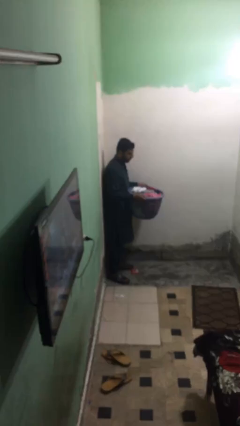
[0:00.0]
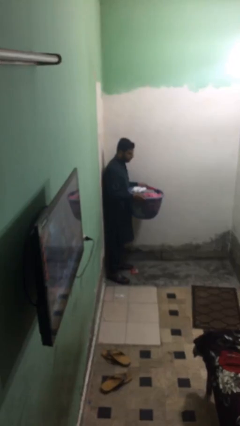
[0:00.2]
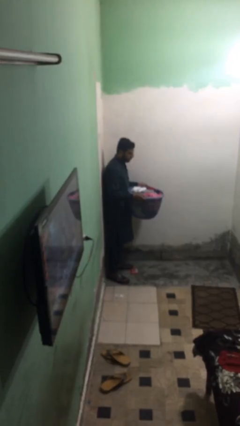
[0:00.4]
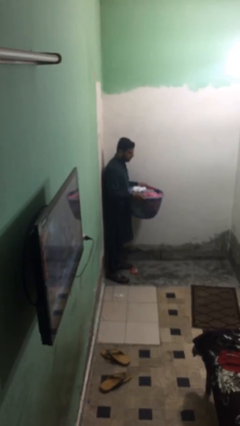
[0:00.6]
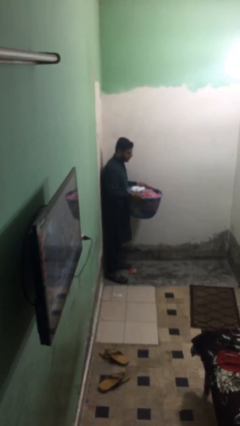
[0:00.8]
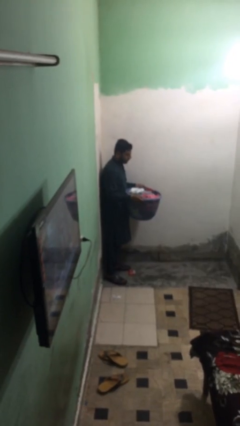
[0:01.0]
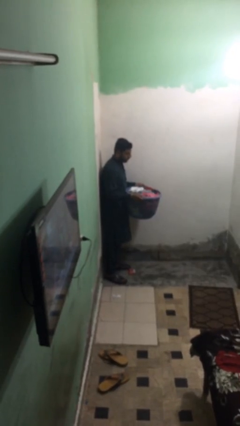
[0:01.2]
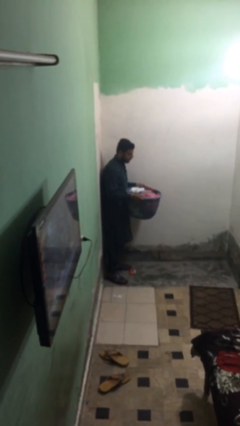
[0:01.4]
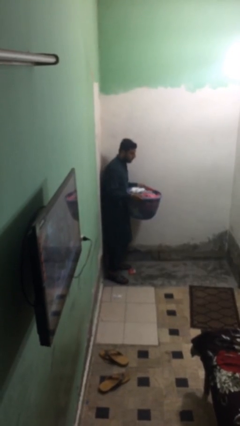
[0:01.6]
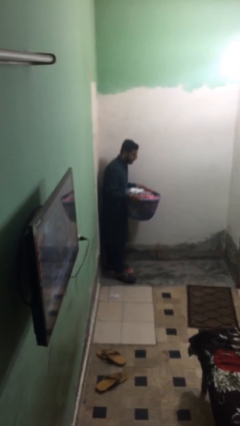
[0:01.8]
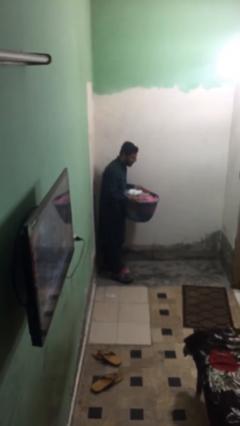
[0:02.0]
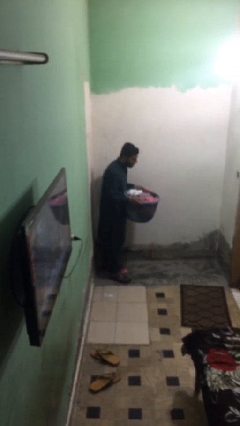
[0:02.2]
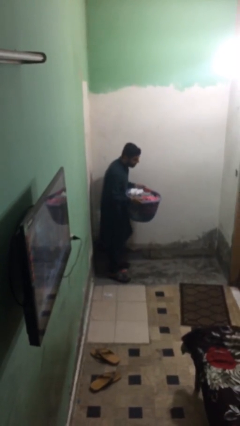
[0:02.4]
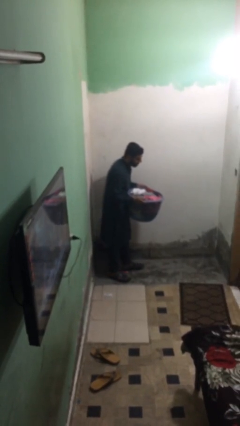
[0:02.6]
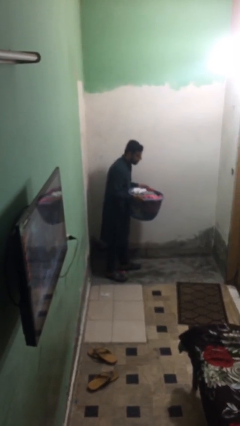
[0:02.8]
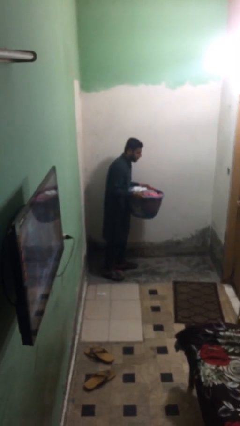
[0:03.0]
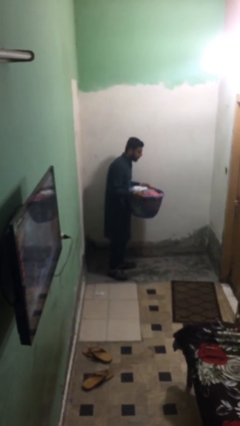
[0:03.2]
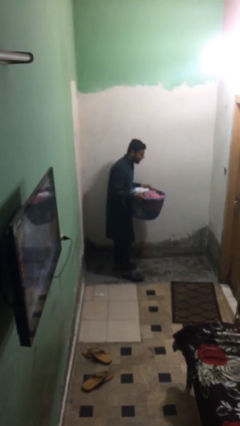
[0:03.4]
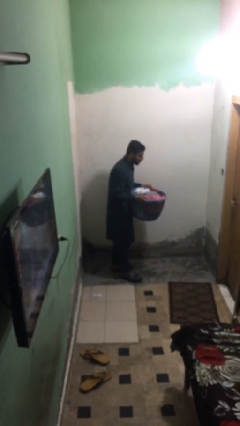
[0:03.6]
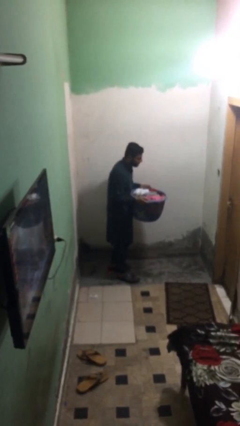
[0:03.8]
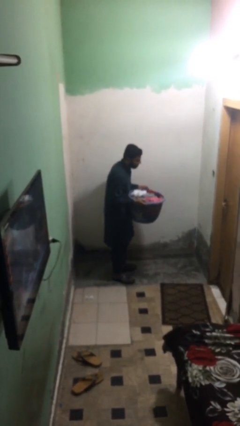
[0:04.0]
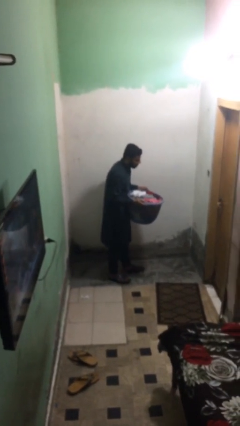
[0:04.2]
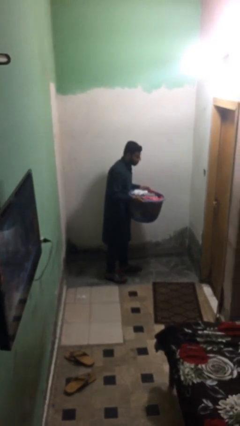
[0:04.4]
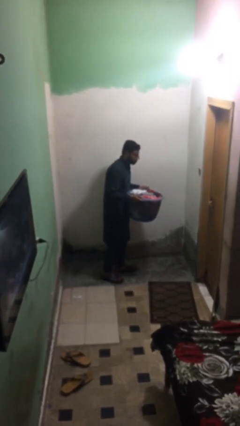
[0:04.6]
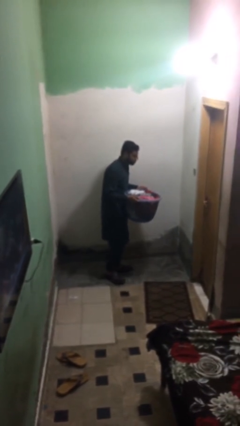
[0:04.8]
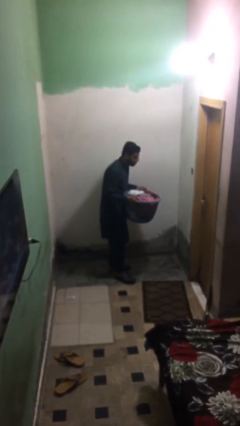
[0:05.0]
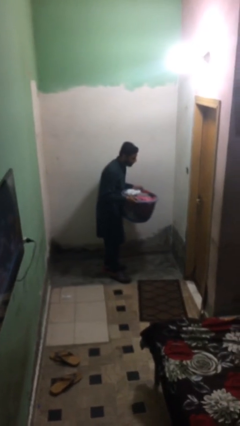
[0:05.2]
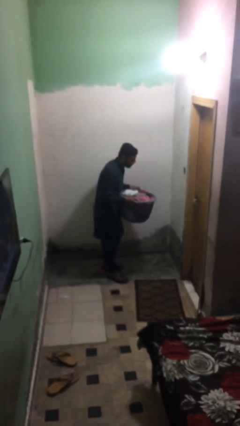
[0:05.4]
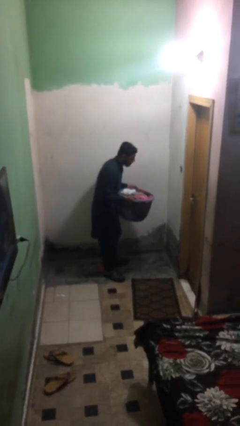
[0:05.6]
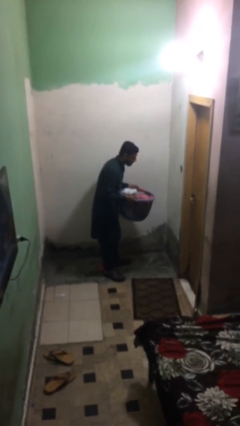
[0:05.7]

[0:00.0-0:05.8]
person carries heavy object

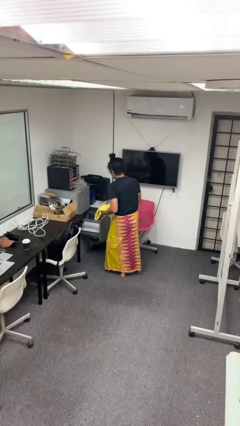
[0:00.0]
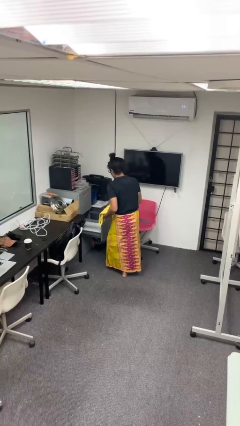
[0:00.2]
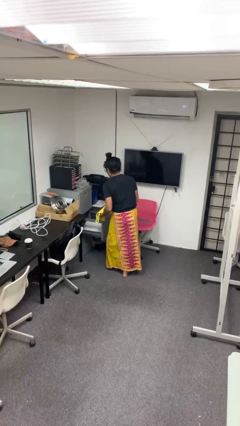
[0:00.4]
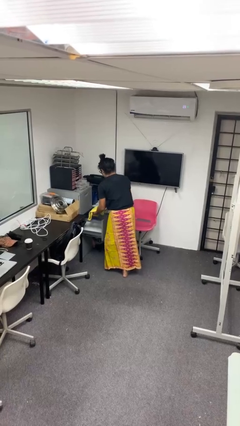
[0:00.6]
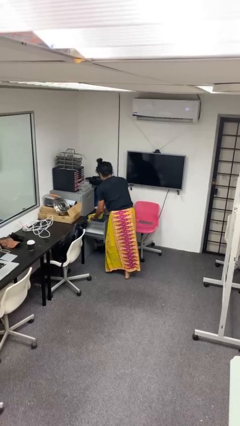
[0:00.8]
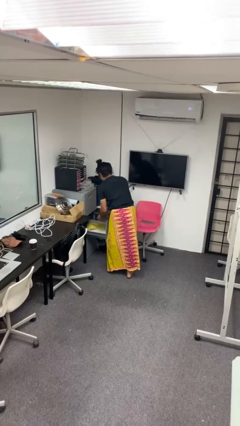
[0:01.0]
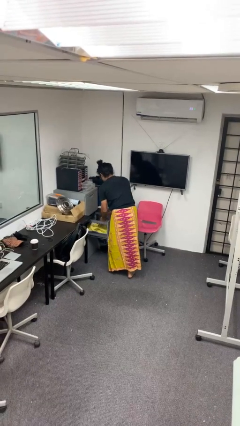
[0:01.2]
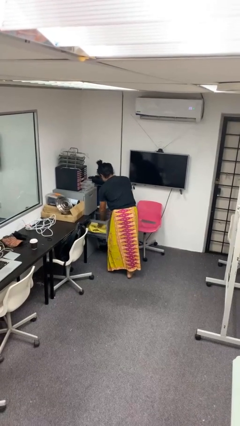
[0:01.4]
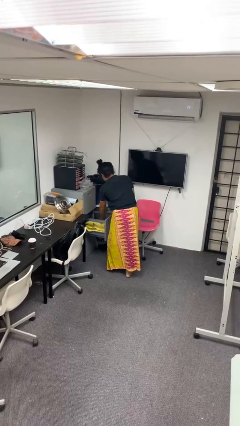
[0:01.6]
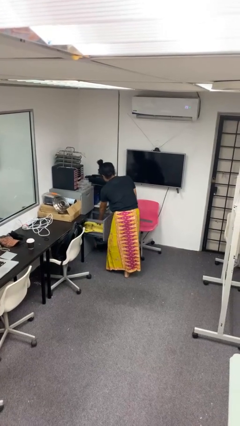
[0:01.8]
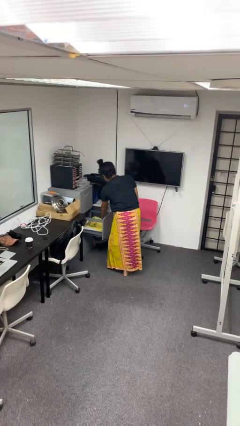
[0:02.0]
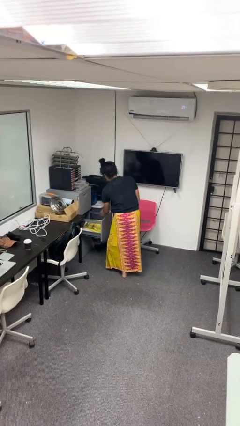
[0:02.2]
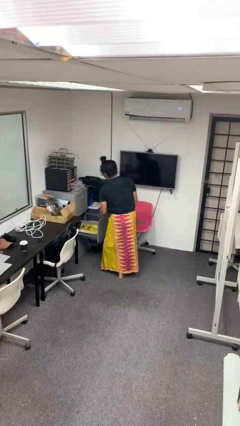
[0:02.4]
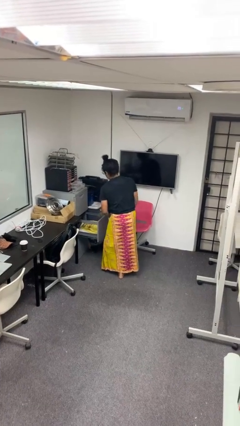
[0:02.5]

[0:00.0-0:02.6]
person puts clothes into dresser

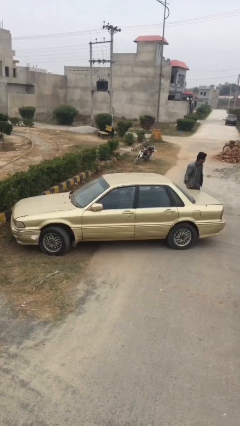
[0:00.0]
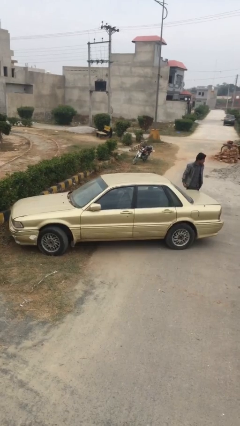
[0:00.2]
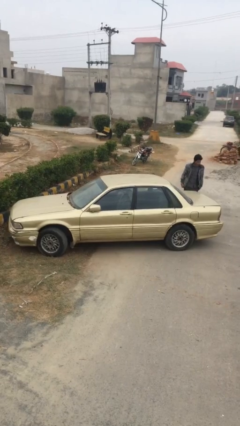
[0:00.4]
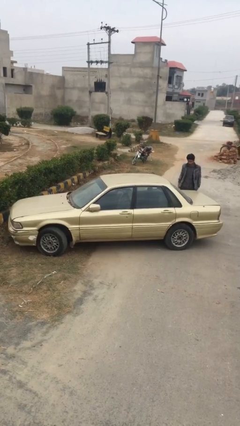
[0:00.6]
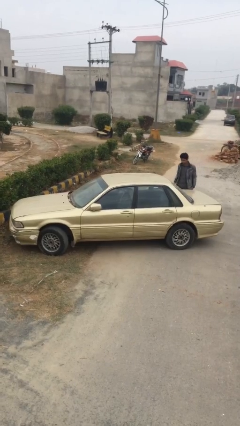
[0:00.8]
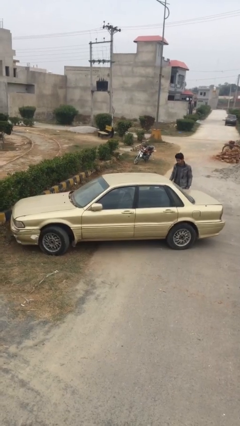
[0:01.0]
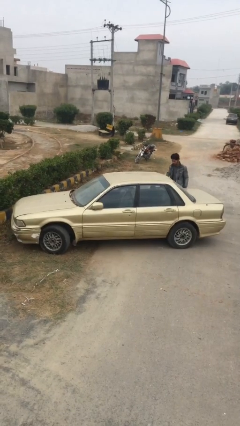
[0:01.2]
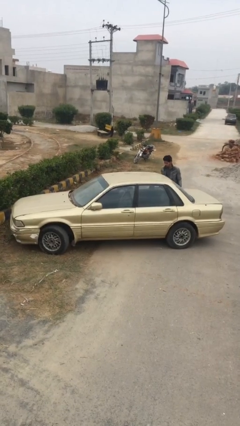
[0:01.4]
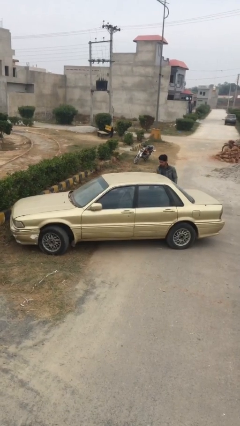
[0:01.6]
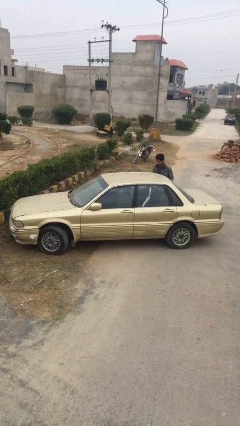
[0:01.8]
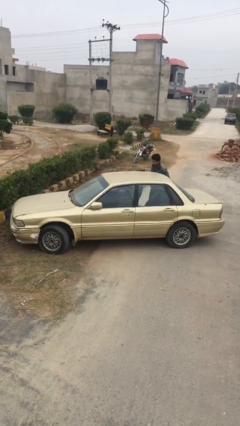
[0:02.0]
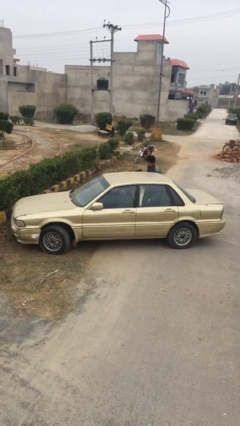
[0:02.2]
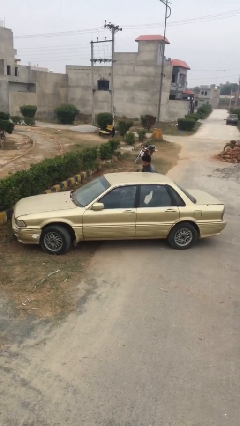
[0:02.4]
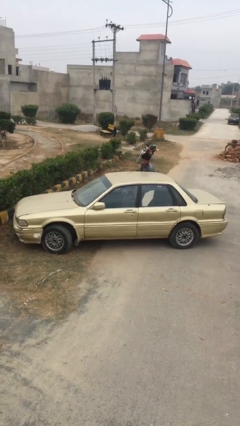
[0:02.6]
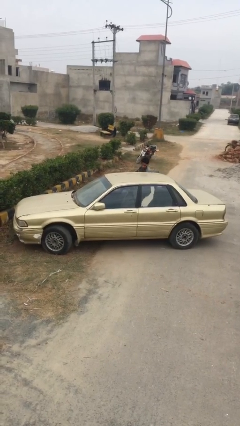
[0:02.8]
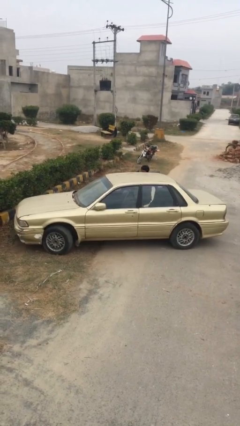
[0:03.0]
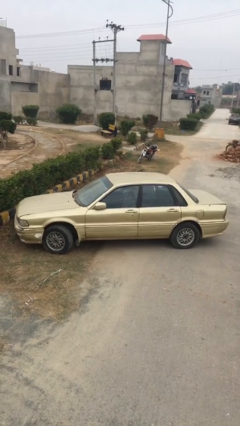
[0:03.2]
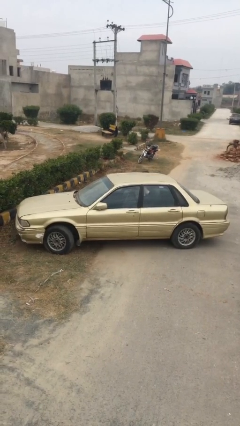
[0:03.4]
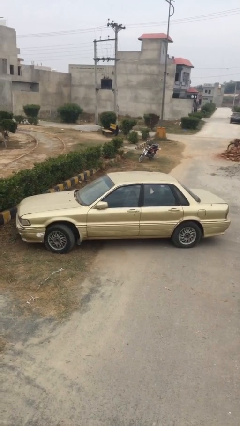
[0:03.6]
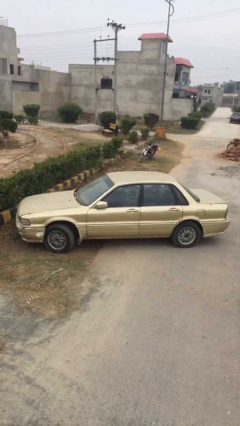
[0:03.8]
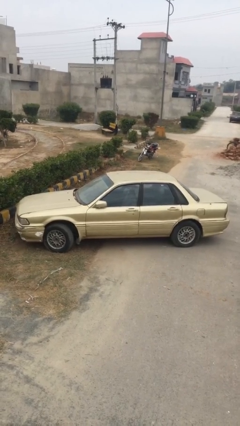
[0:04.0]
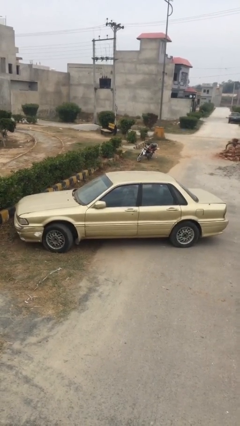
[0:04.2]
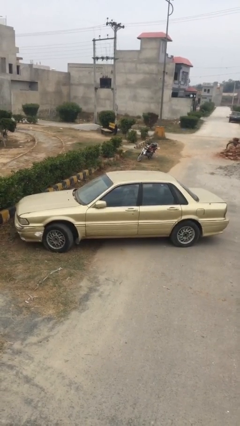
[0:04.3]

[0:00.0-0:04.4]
car picks up person

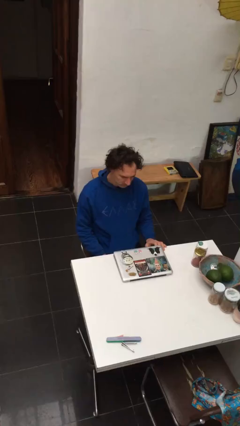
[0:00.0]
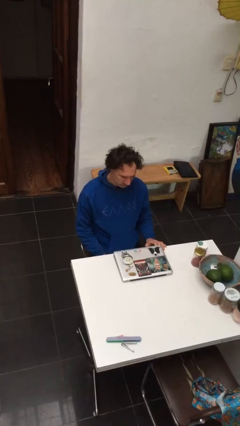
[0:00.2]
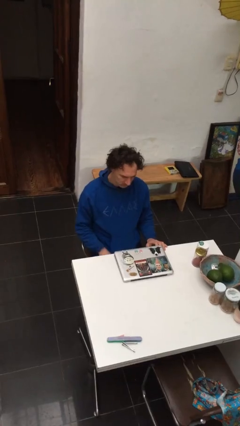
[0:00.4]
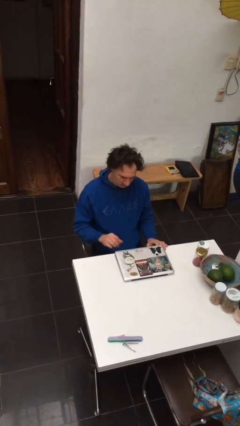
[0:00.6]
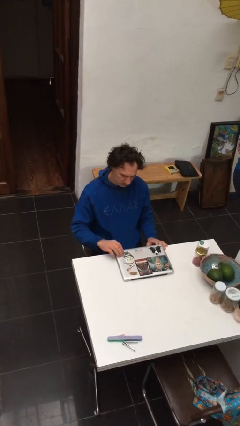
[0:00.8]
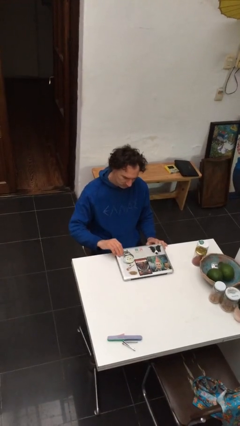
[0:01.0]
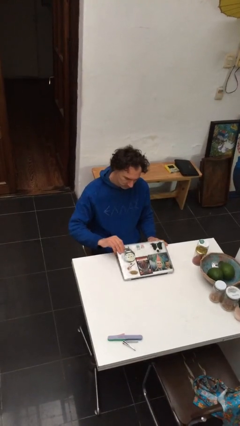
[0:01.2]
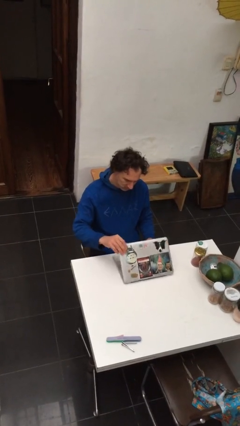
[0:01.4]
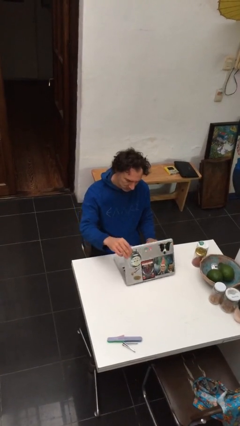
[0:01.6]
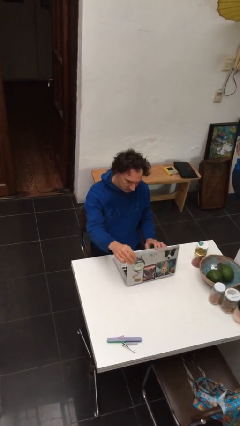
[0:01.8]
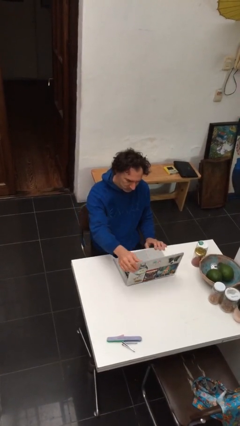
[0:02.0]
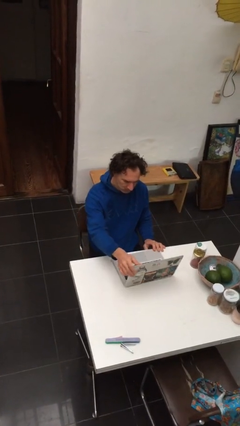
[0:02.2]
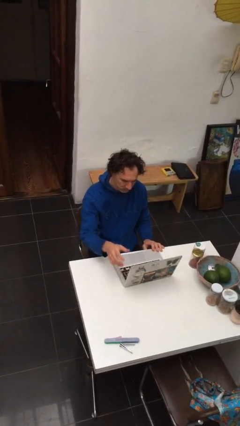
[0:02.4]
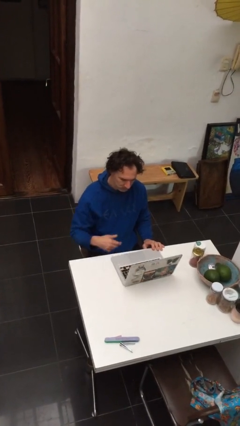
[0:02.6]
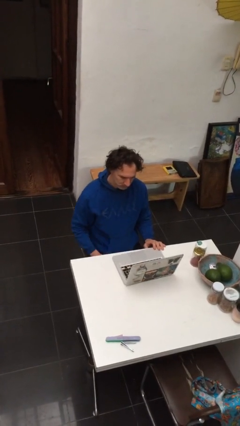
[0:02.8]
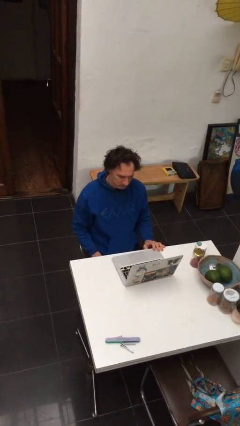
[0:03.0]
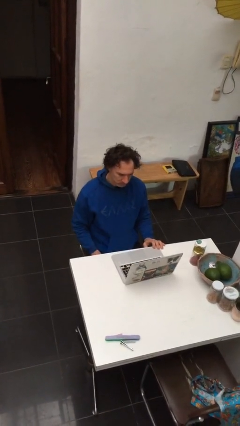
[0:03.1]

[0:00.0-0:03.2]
person opens laptop

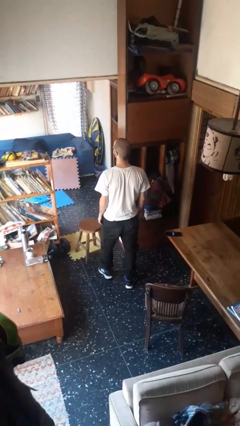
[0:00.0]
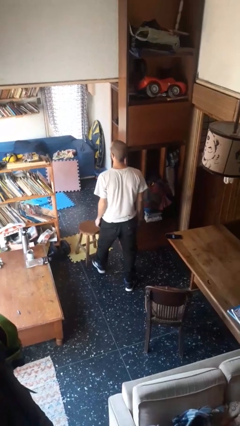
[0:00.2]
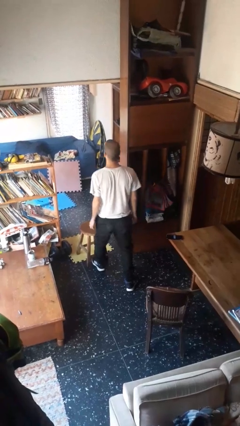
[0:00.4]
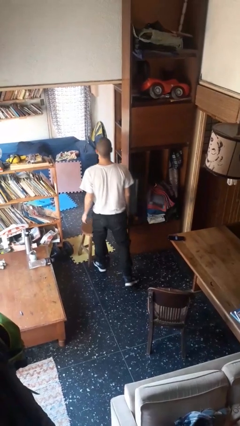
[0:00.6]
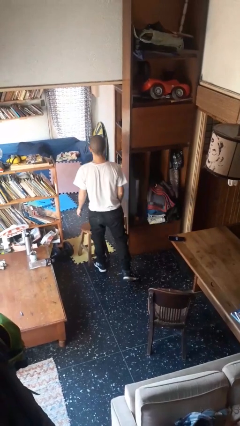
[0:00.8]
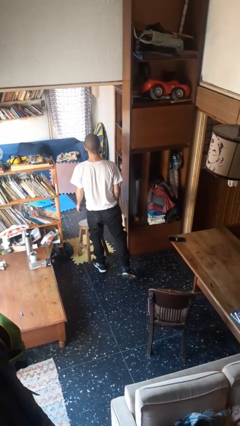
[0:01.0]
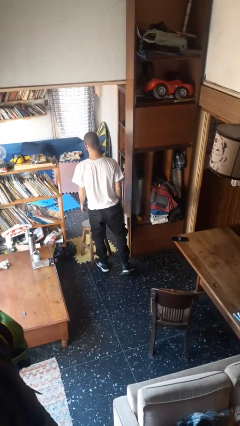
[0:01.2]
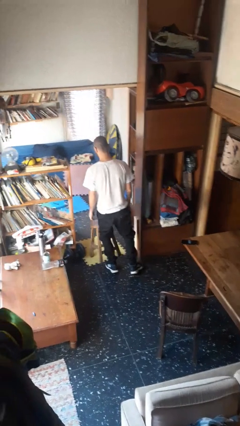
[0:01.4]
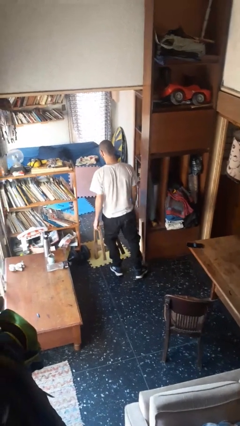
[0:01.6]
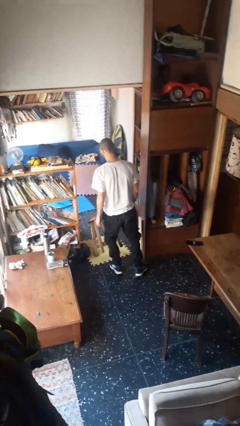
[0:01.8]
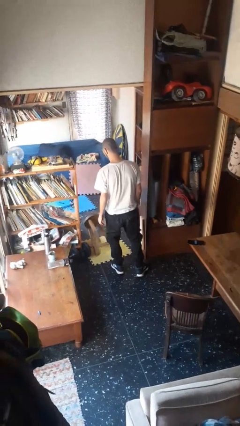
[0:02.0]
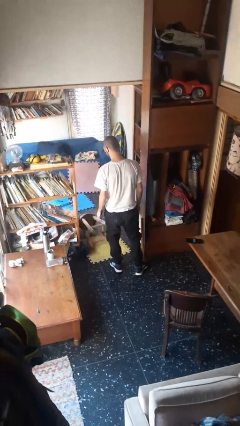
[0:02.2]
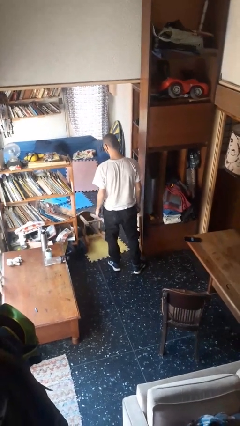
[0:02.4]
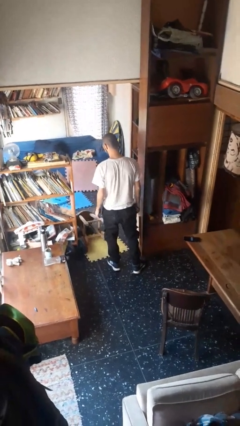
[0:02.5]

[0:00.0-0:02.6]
person knocks over furniture
